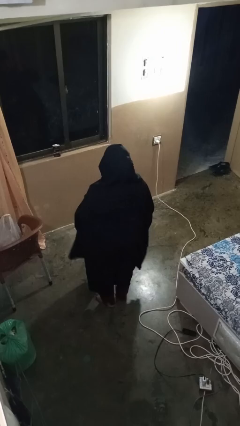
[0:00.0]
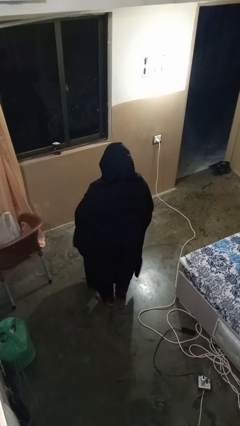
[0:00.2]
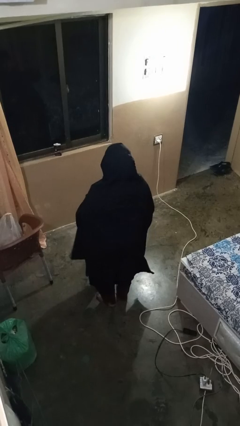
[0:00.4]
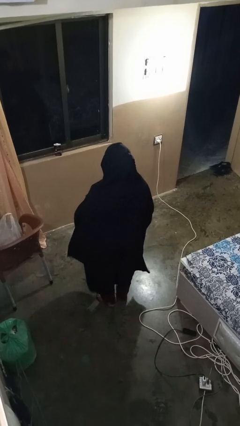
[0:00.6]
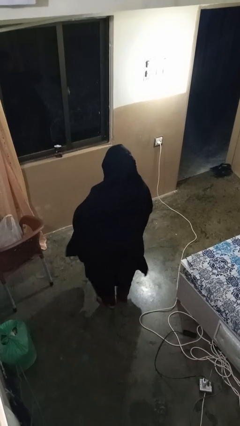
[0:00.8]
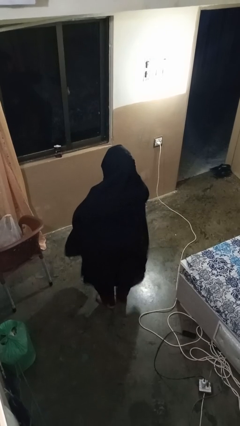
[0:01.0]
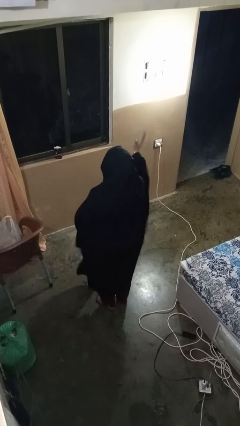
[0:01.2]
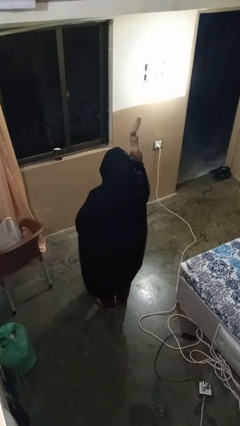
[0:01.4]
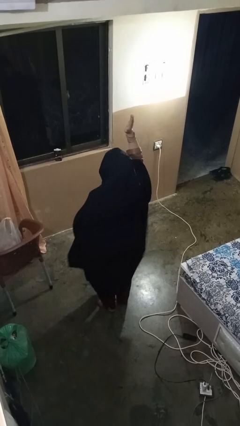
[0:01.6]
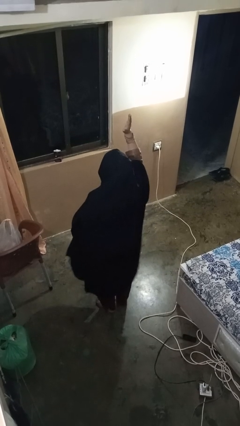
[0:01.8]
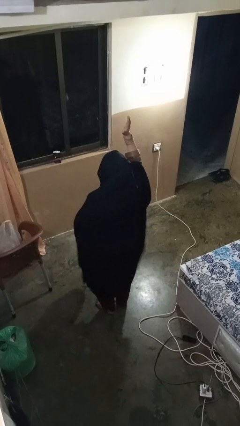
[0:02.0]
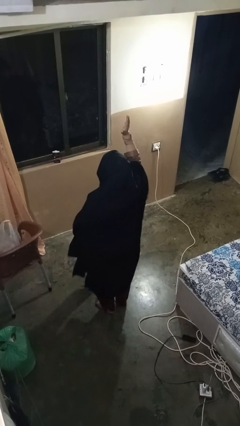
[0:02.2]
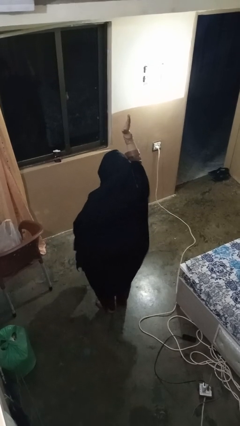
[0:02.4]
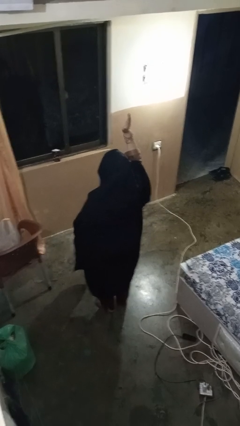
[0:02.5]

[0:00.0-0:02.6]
person gestures raise hand

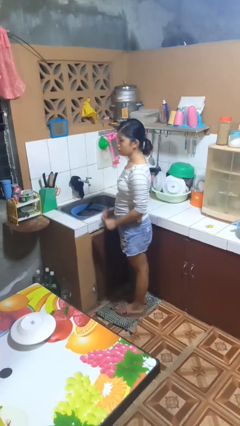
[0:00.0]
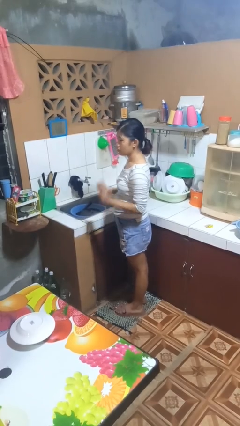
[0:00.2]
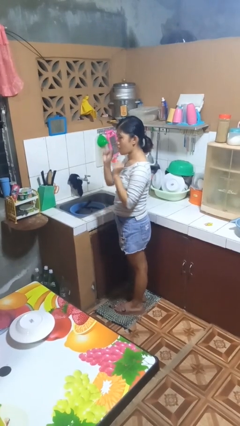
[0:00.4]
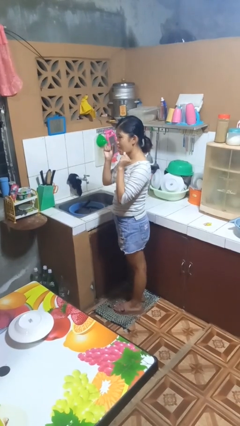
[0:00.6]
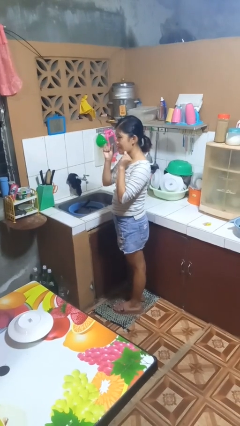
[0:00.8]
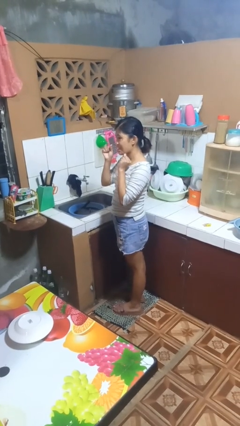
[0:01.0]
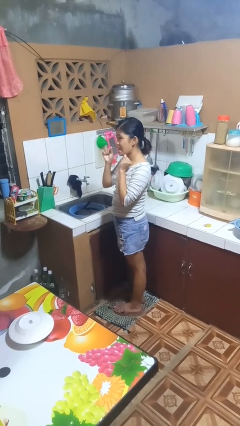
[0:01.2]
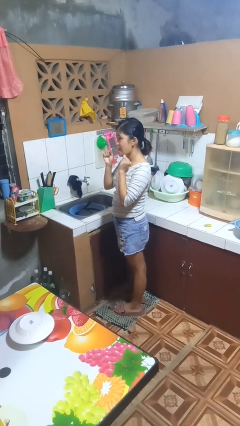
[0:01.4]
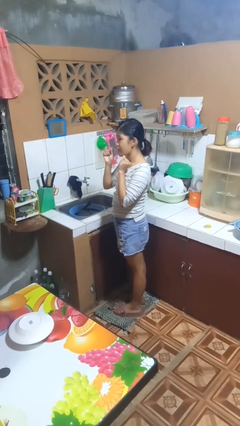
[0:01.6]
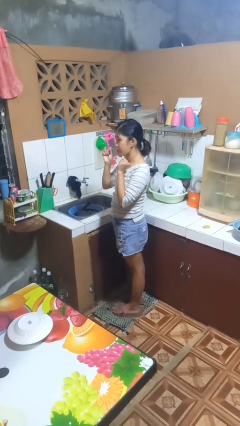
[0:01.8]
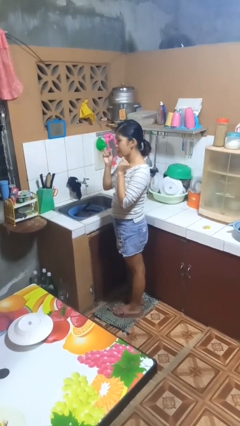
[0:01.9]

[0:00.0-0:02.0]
person flosses

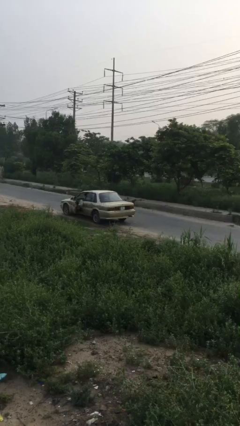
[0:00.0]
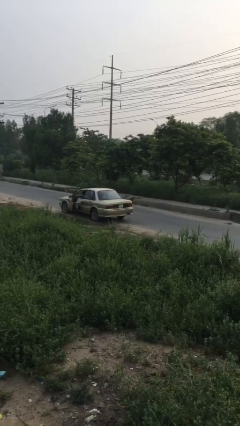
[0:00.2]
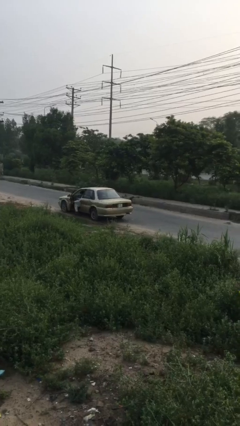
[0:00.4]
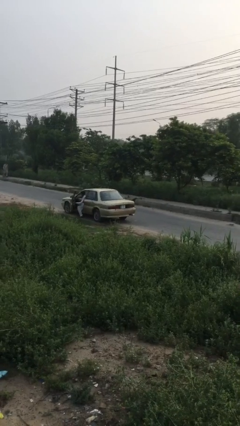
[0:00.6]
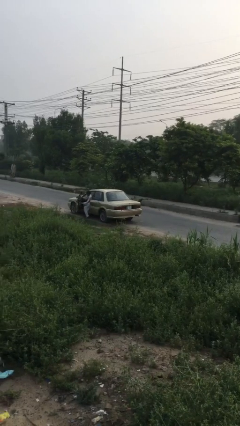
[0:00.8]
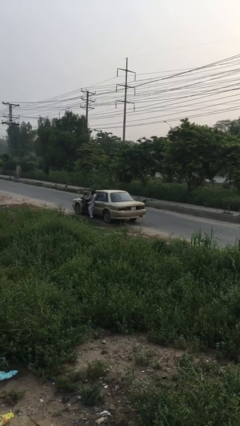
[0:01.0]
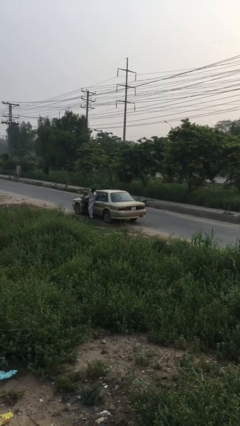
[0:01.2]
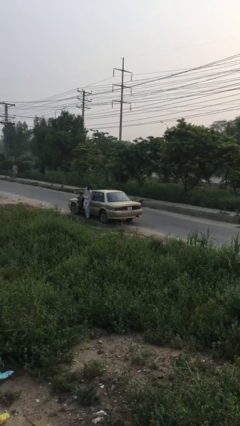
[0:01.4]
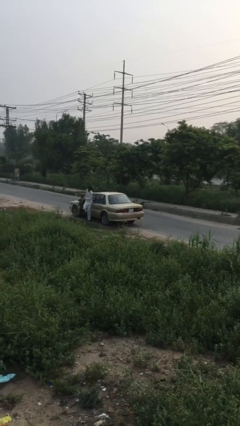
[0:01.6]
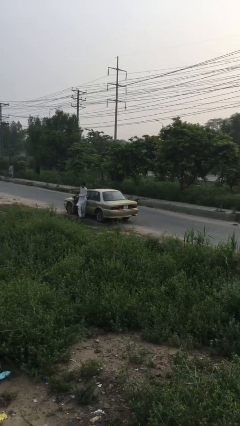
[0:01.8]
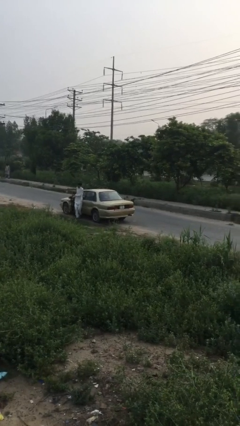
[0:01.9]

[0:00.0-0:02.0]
car drops off person

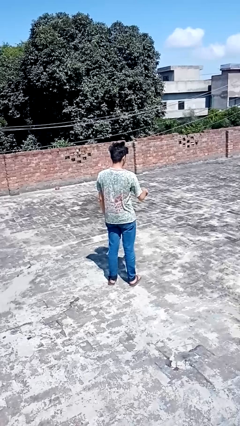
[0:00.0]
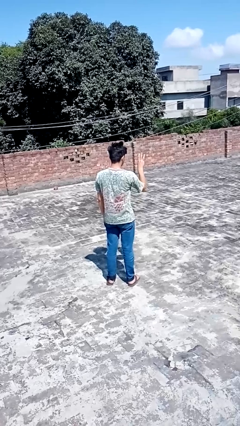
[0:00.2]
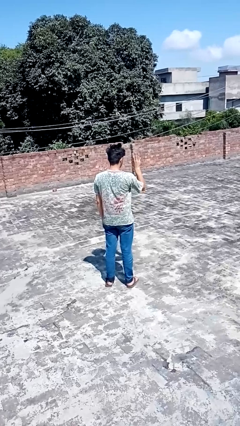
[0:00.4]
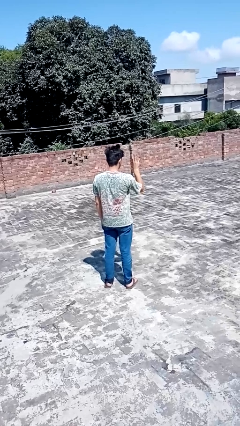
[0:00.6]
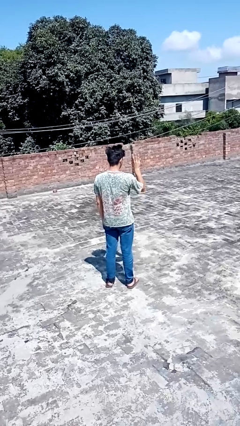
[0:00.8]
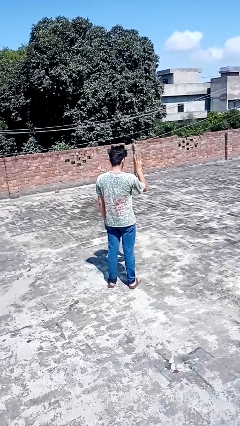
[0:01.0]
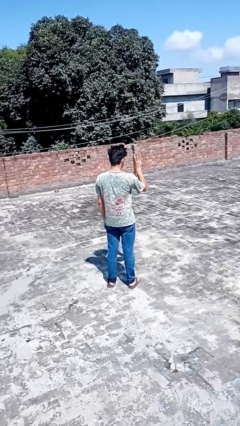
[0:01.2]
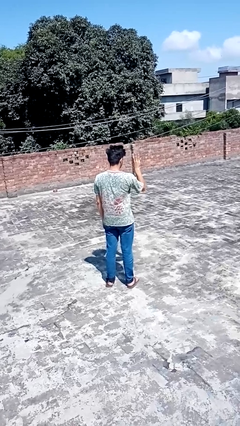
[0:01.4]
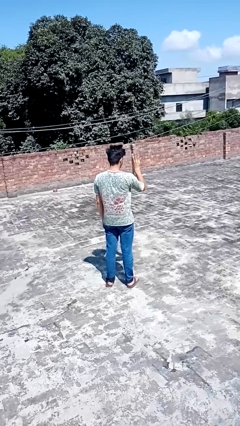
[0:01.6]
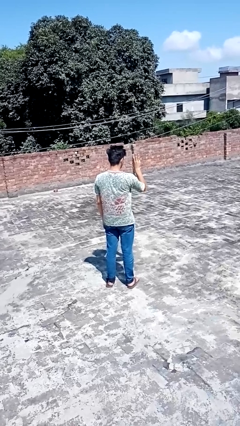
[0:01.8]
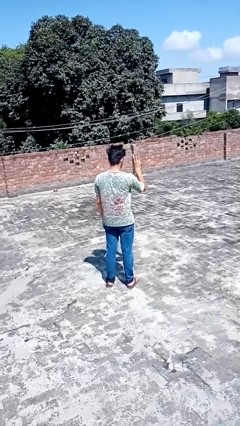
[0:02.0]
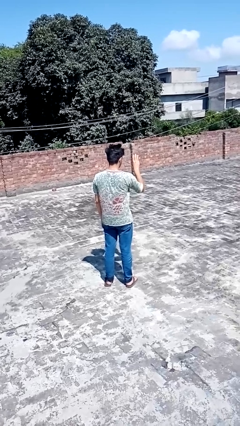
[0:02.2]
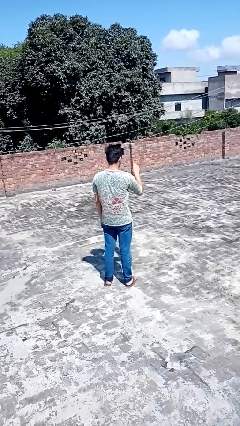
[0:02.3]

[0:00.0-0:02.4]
person gestures number three

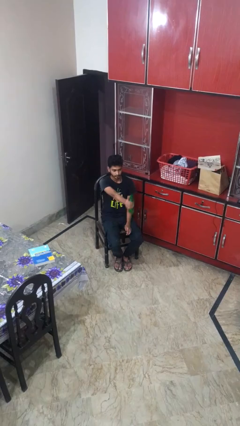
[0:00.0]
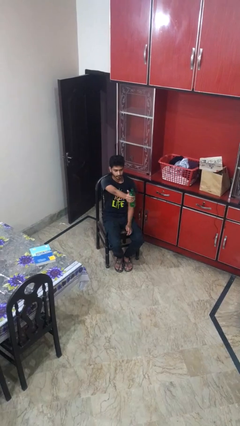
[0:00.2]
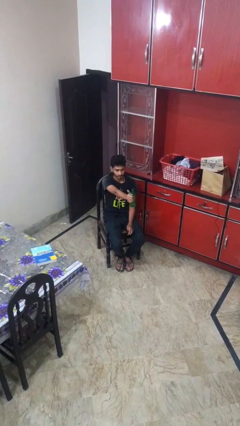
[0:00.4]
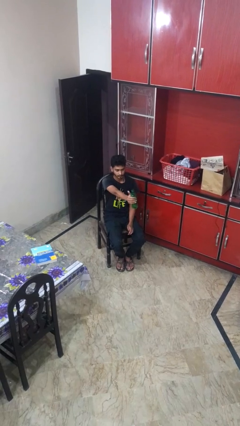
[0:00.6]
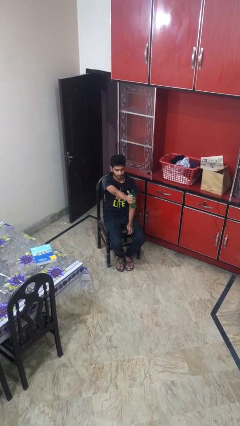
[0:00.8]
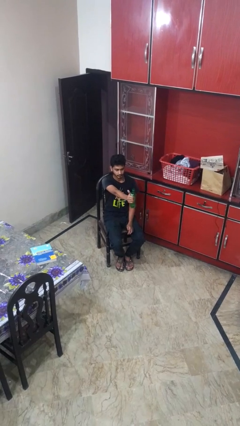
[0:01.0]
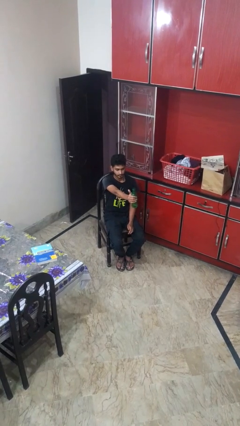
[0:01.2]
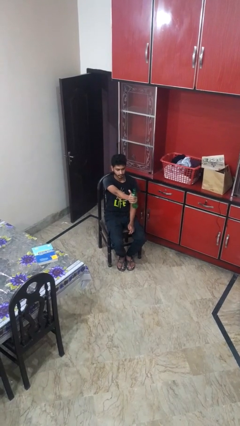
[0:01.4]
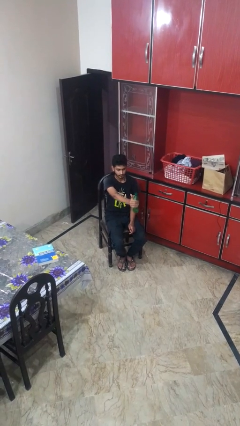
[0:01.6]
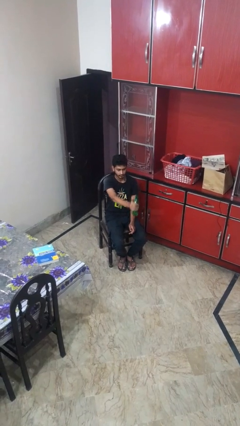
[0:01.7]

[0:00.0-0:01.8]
person squeezes object

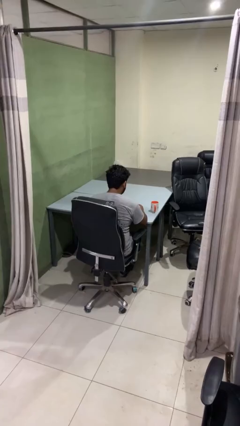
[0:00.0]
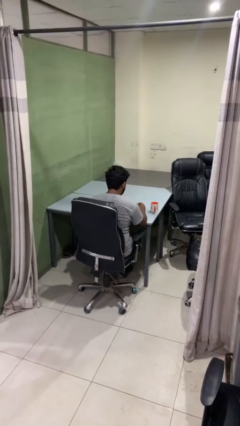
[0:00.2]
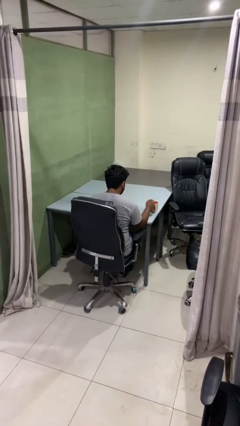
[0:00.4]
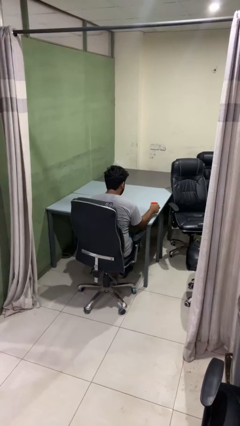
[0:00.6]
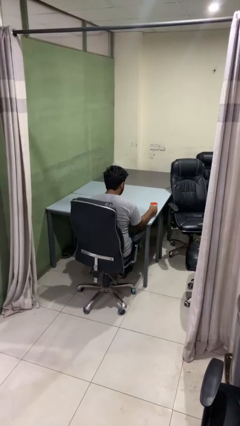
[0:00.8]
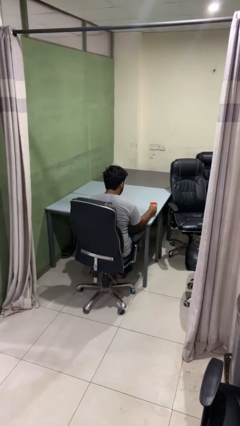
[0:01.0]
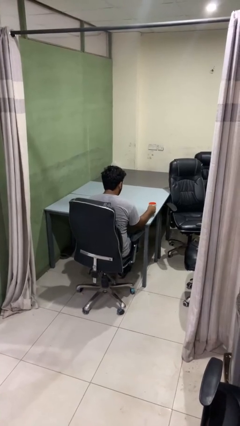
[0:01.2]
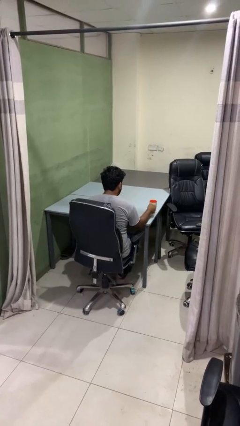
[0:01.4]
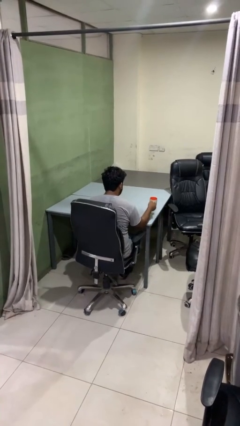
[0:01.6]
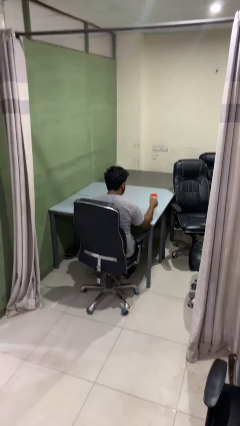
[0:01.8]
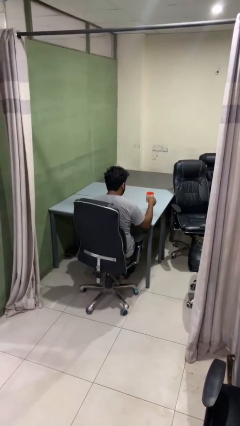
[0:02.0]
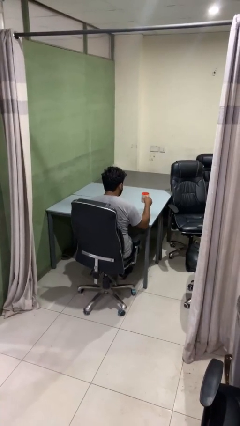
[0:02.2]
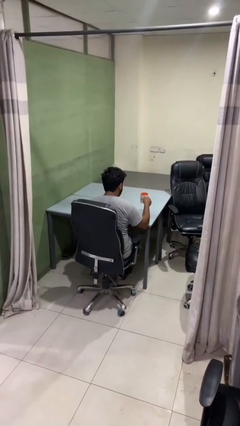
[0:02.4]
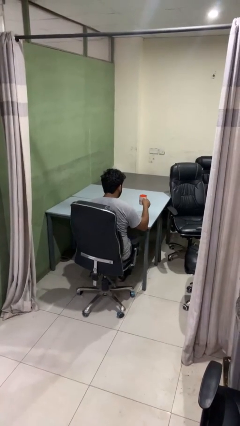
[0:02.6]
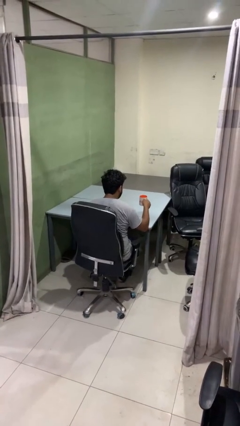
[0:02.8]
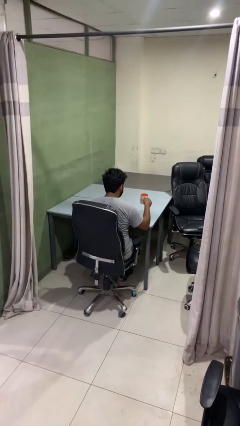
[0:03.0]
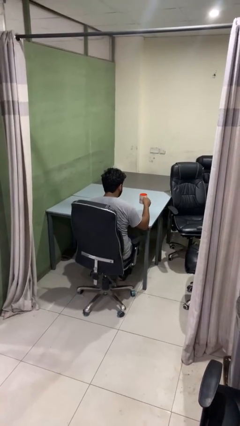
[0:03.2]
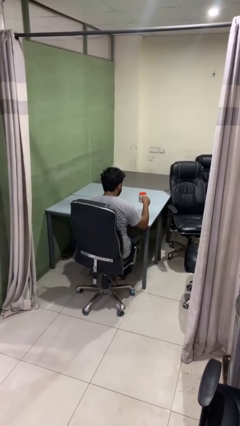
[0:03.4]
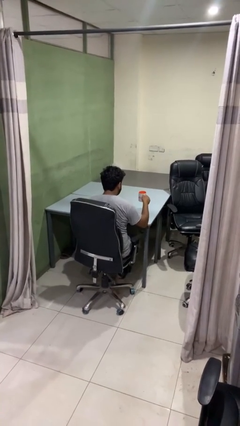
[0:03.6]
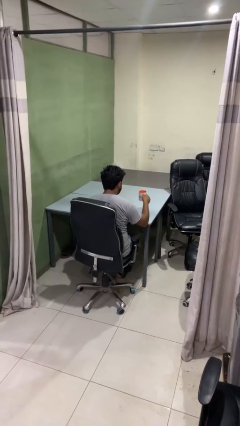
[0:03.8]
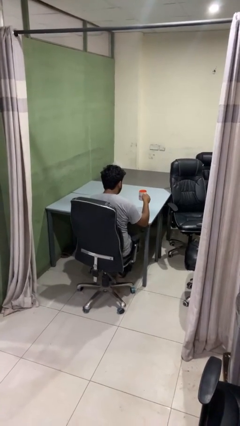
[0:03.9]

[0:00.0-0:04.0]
person picks up object from table

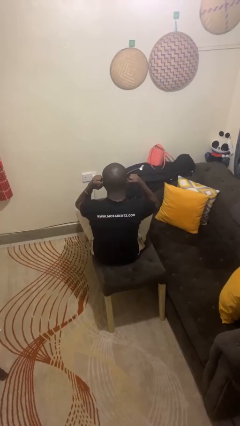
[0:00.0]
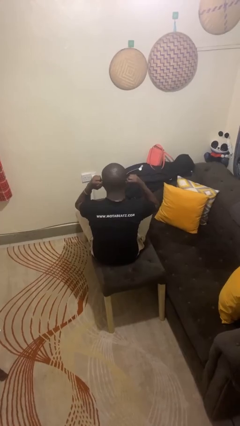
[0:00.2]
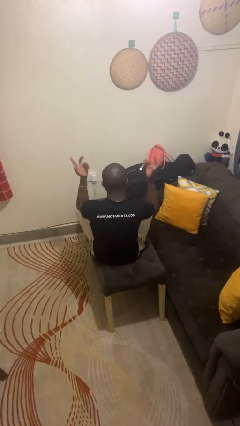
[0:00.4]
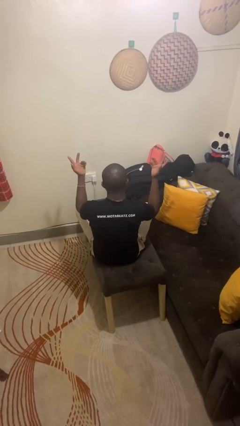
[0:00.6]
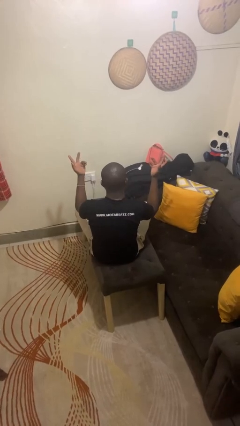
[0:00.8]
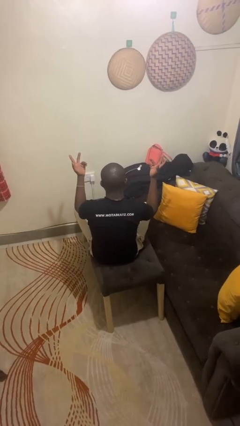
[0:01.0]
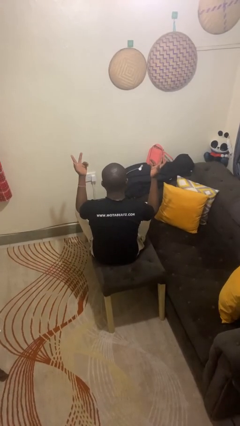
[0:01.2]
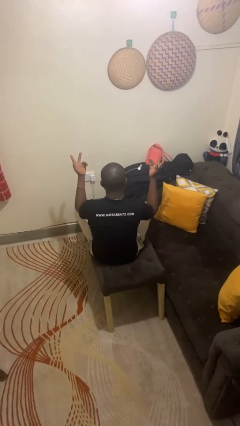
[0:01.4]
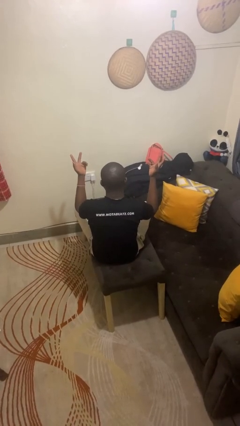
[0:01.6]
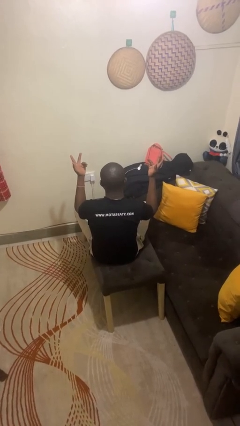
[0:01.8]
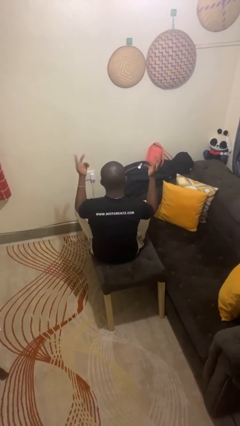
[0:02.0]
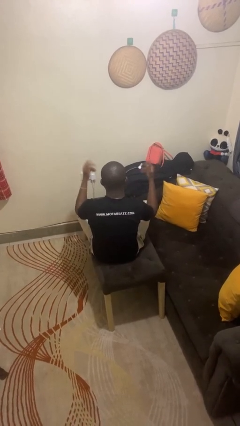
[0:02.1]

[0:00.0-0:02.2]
person puts fingers in ear

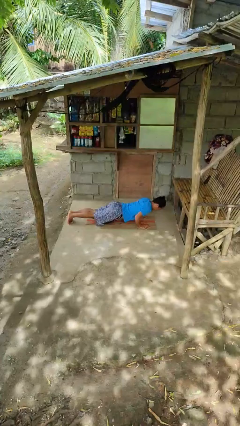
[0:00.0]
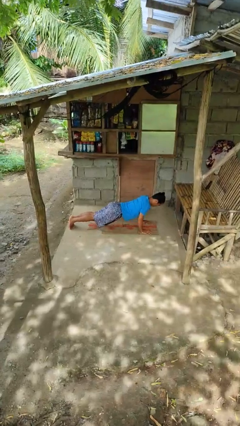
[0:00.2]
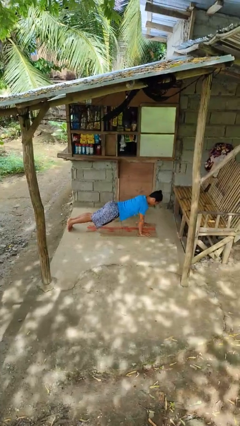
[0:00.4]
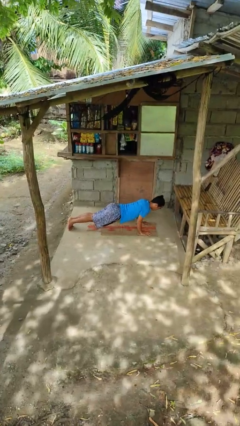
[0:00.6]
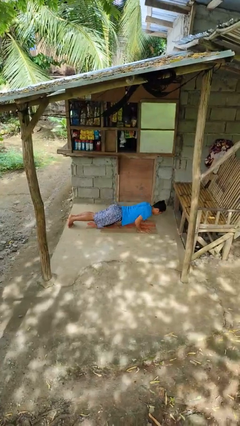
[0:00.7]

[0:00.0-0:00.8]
person exercises with pushup
